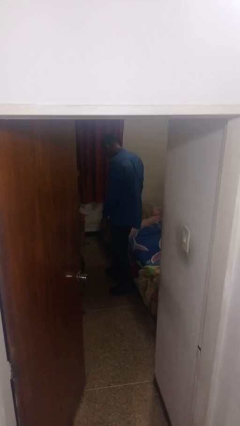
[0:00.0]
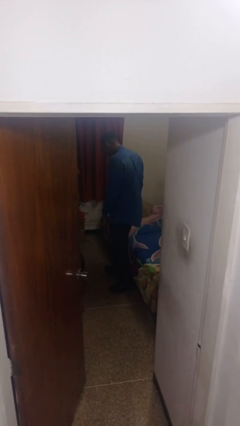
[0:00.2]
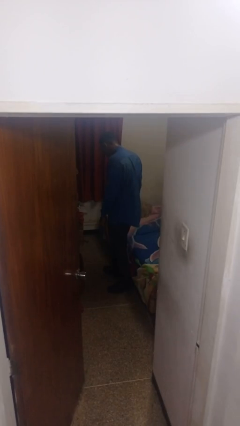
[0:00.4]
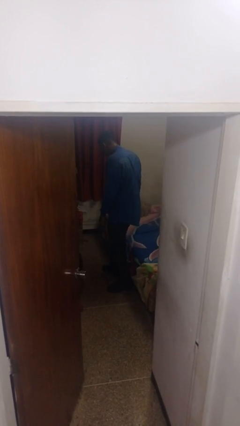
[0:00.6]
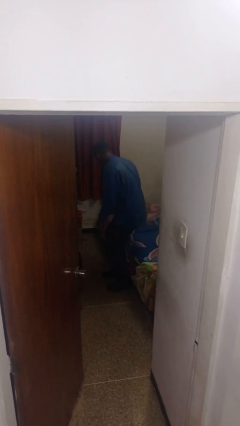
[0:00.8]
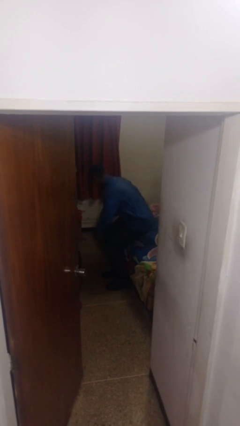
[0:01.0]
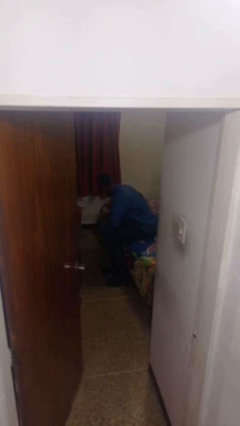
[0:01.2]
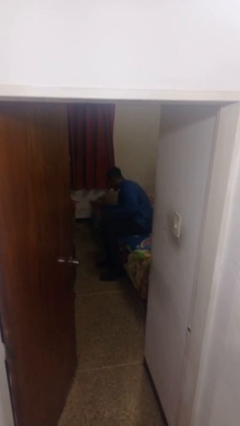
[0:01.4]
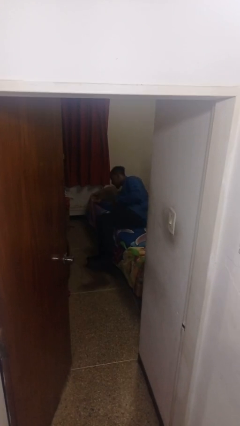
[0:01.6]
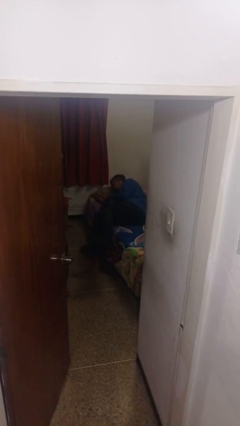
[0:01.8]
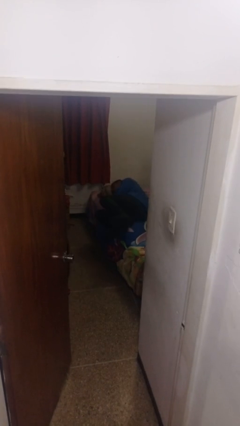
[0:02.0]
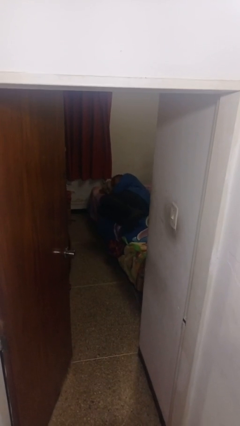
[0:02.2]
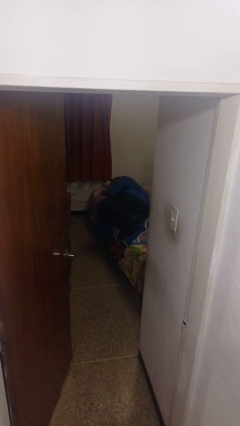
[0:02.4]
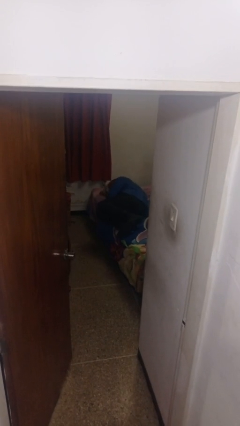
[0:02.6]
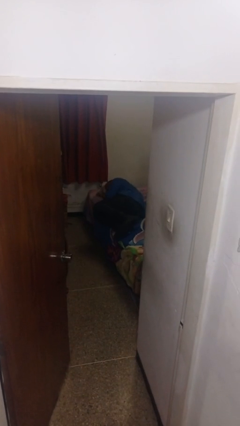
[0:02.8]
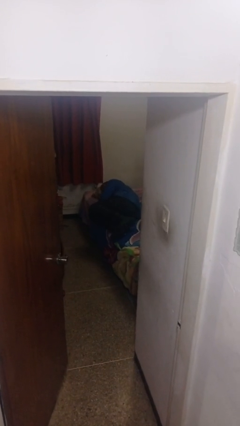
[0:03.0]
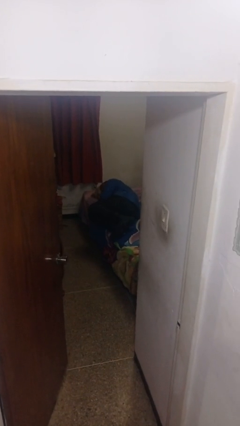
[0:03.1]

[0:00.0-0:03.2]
person lies down on bed

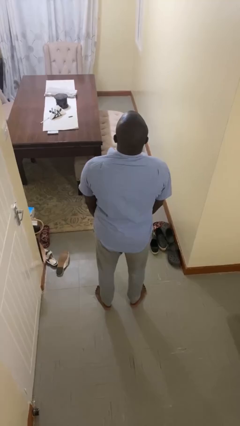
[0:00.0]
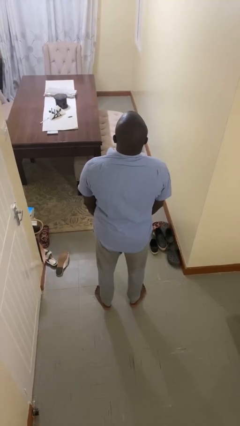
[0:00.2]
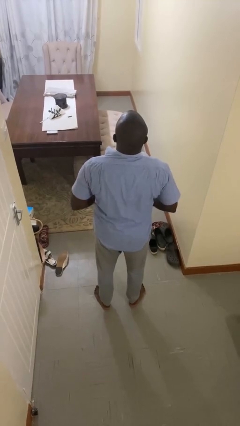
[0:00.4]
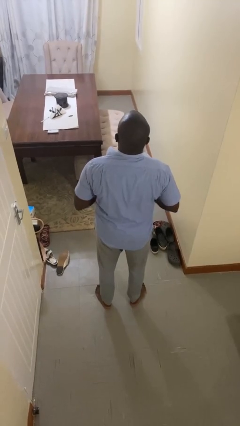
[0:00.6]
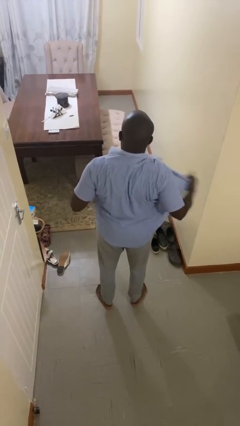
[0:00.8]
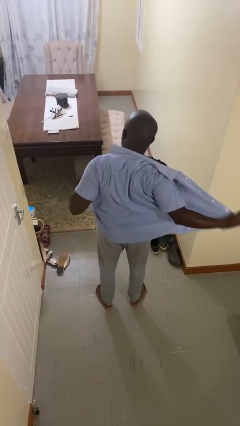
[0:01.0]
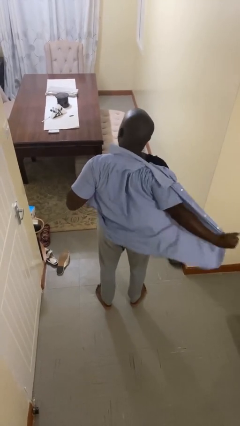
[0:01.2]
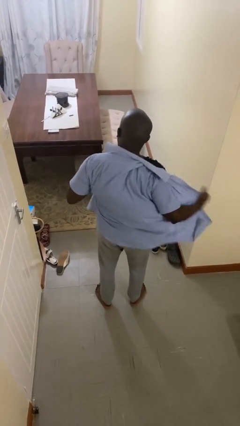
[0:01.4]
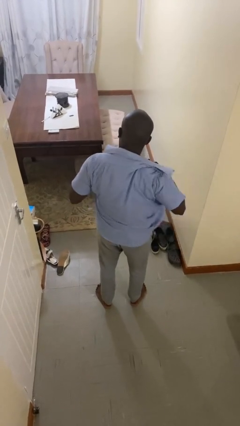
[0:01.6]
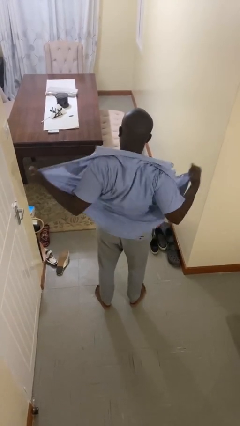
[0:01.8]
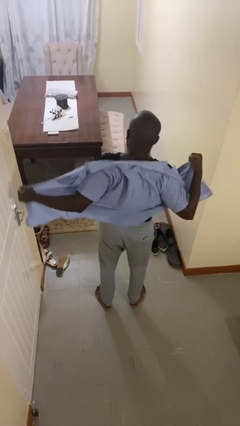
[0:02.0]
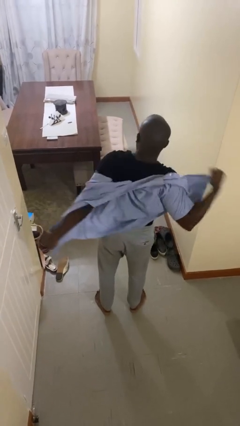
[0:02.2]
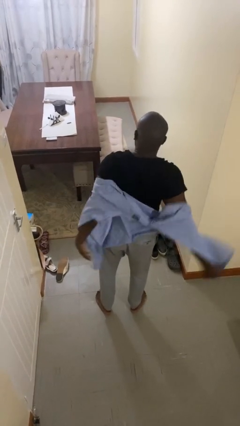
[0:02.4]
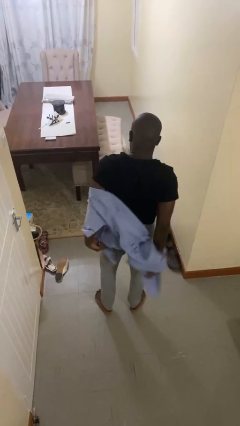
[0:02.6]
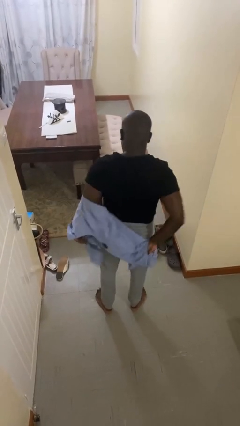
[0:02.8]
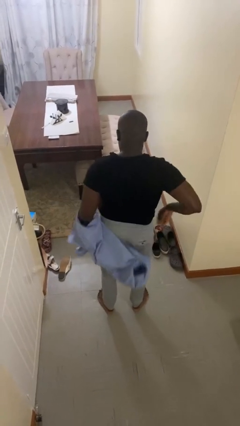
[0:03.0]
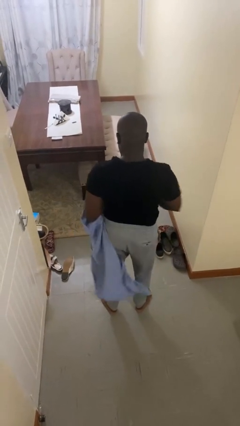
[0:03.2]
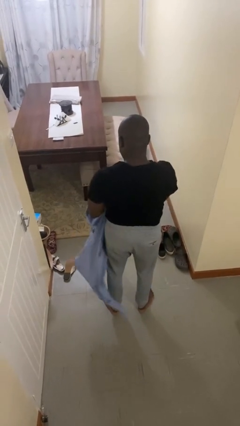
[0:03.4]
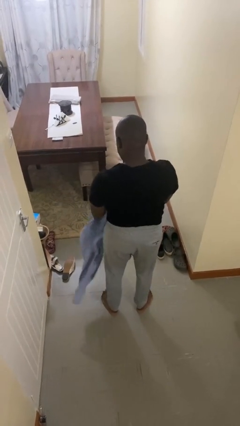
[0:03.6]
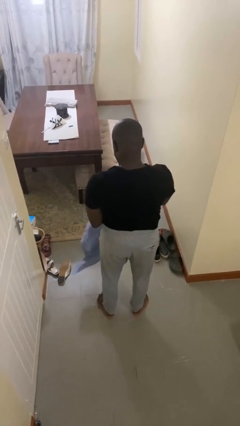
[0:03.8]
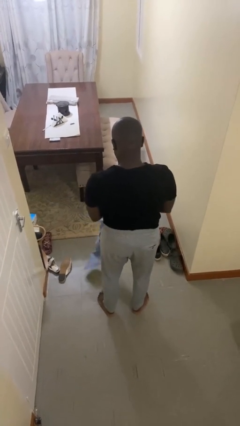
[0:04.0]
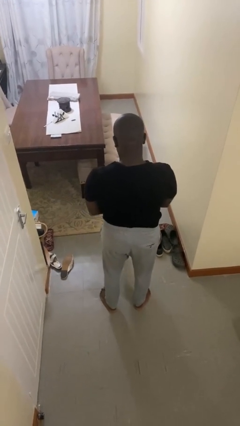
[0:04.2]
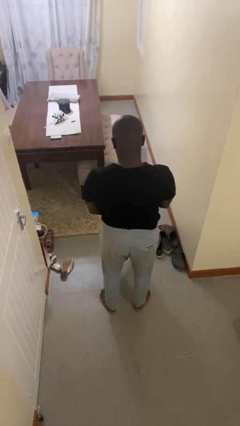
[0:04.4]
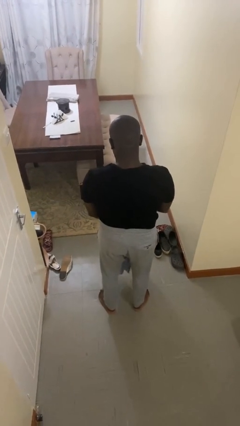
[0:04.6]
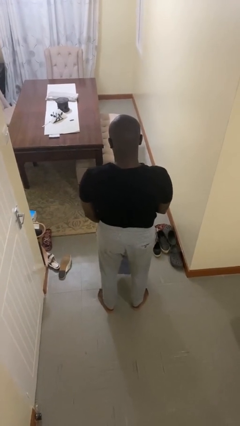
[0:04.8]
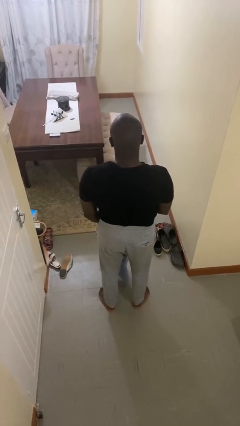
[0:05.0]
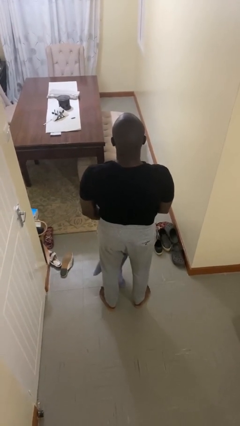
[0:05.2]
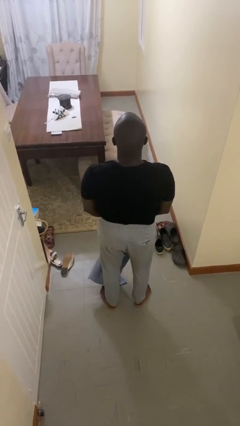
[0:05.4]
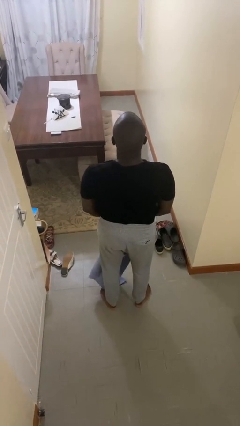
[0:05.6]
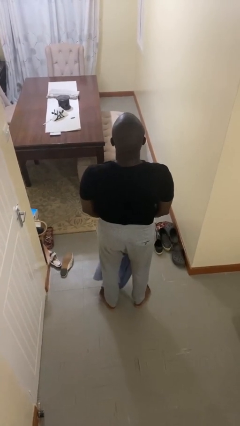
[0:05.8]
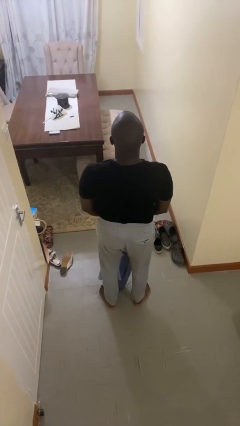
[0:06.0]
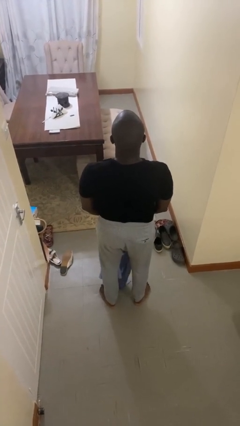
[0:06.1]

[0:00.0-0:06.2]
person takes off shirt

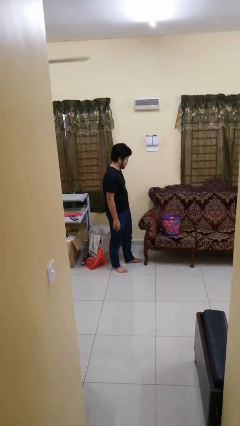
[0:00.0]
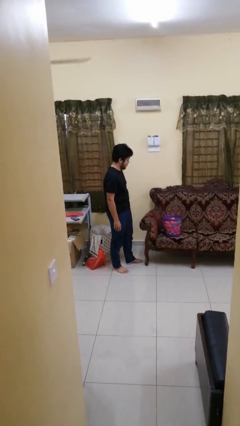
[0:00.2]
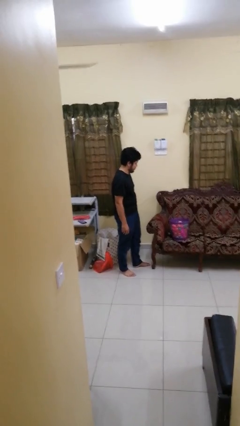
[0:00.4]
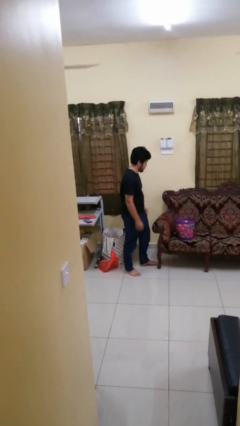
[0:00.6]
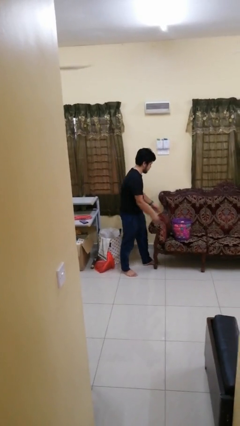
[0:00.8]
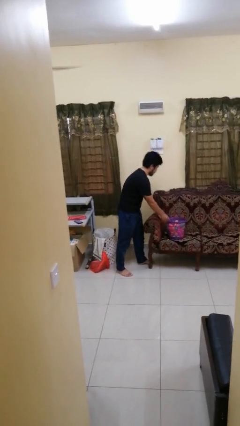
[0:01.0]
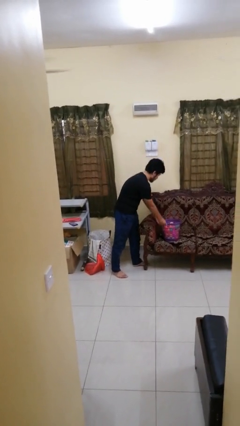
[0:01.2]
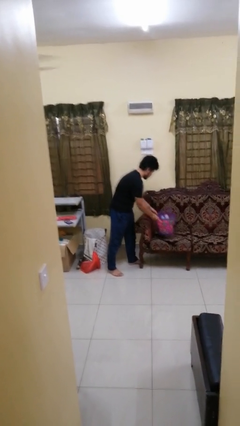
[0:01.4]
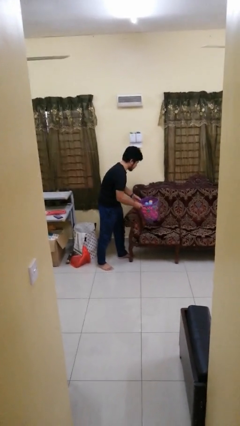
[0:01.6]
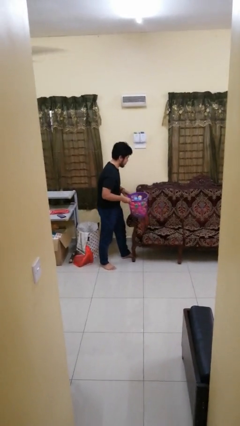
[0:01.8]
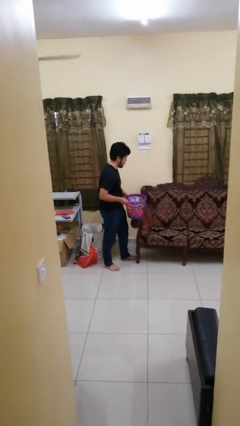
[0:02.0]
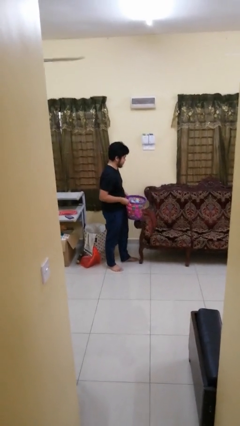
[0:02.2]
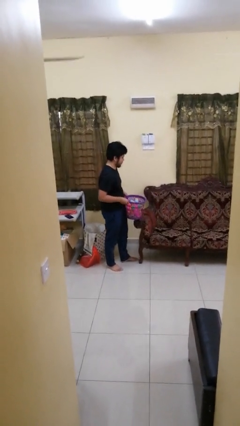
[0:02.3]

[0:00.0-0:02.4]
person puts down object on couch

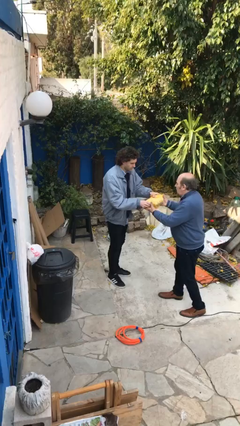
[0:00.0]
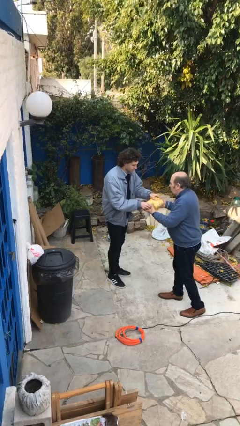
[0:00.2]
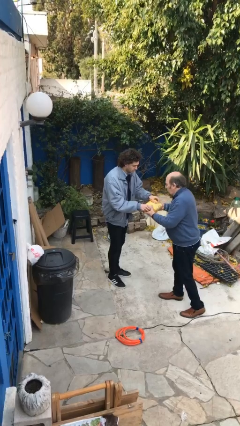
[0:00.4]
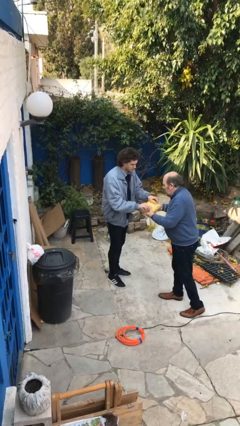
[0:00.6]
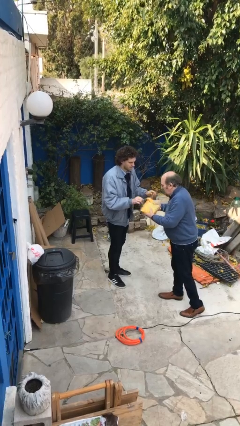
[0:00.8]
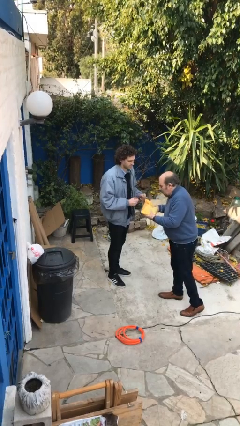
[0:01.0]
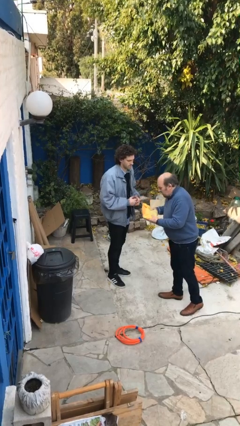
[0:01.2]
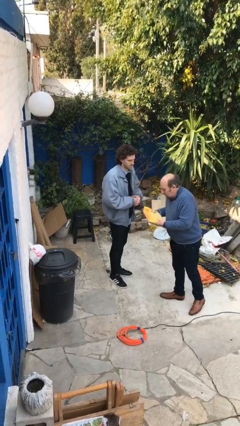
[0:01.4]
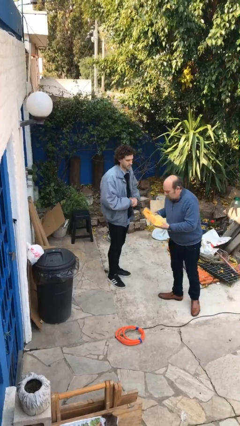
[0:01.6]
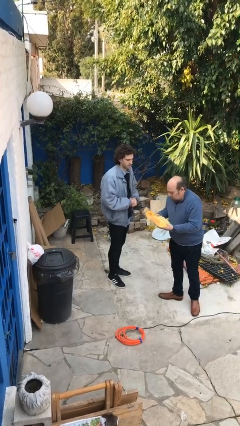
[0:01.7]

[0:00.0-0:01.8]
person transfers object to person

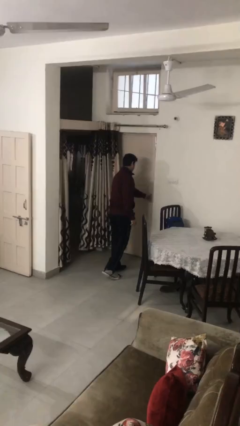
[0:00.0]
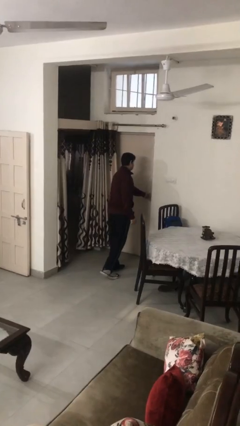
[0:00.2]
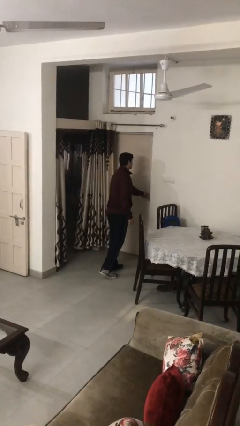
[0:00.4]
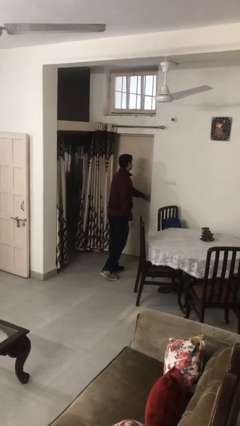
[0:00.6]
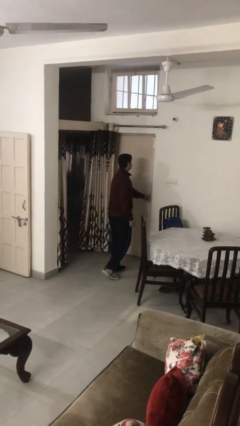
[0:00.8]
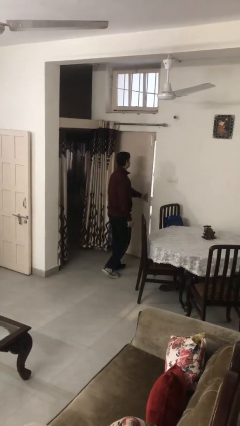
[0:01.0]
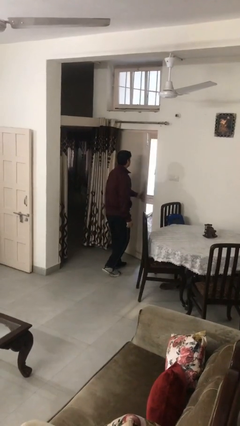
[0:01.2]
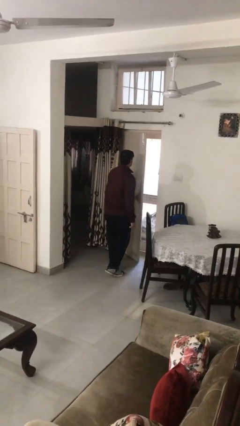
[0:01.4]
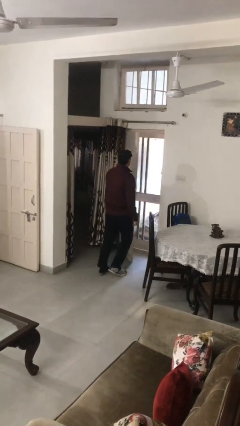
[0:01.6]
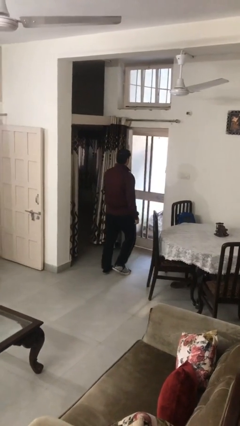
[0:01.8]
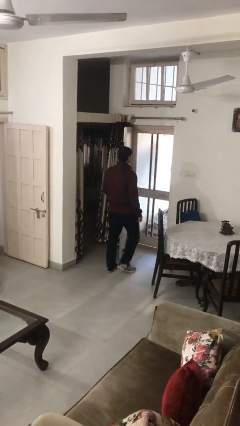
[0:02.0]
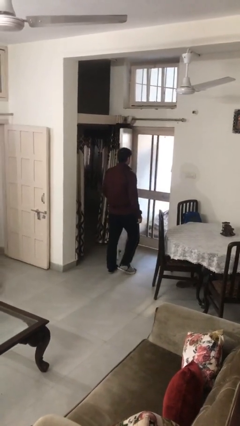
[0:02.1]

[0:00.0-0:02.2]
person opens facility door

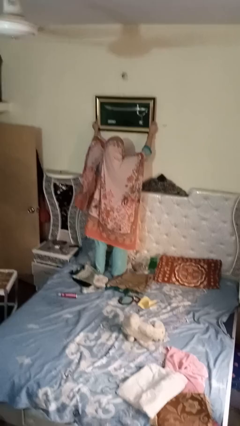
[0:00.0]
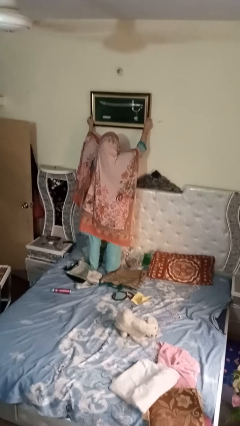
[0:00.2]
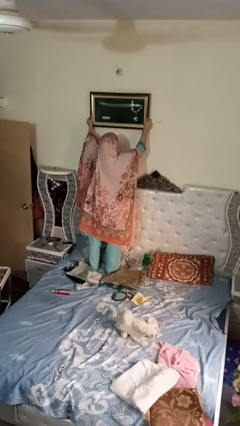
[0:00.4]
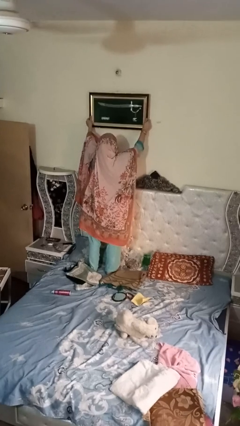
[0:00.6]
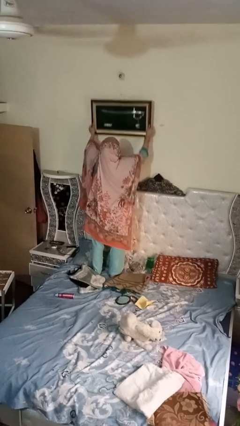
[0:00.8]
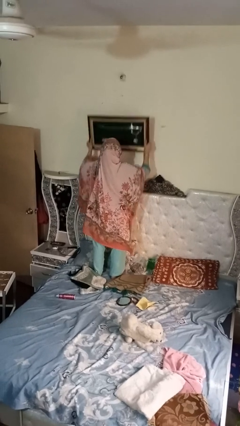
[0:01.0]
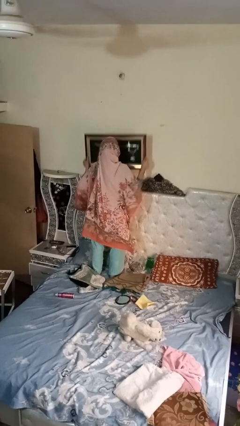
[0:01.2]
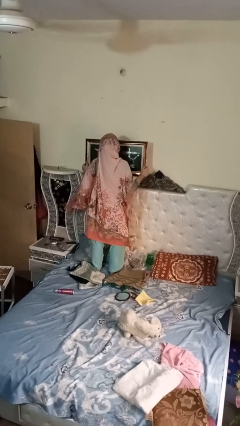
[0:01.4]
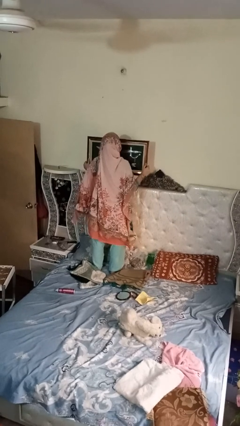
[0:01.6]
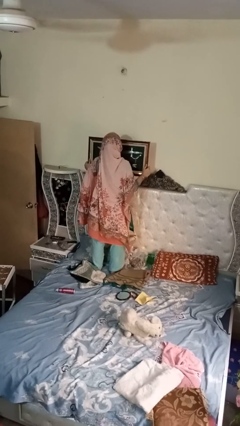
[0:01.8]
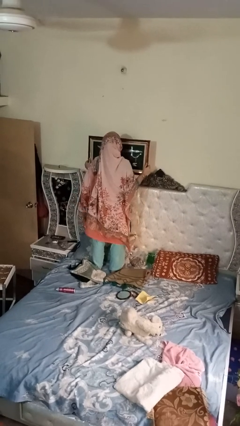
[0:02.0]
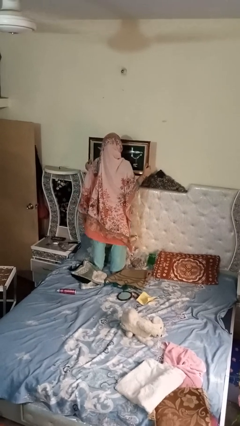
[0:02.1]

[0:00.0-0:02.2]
person puts up picture frame
